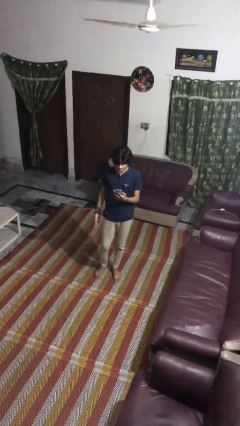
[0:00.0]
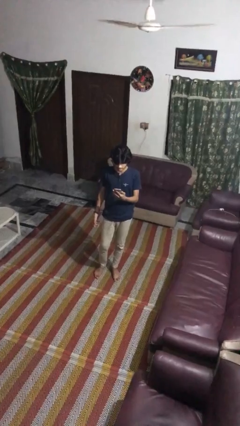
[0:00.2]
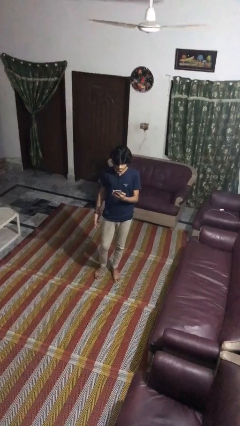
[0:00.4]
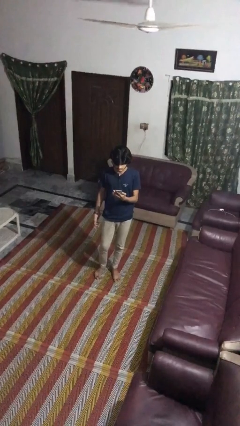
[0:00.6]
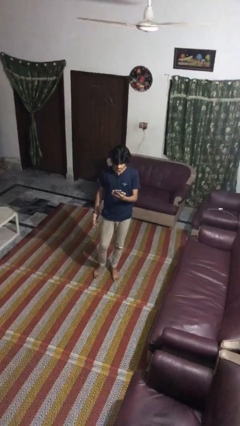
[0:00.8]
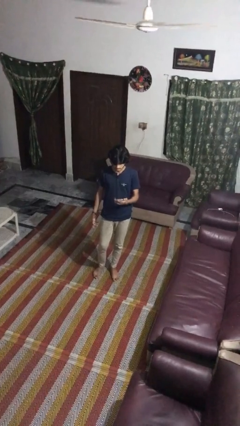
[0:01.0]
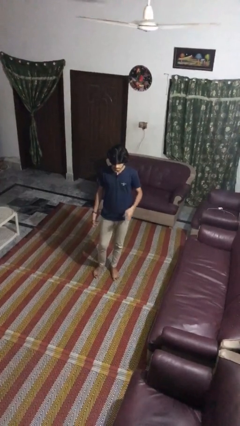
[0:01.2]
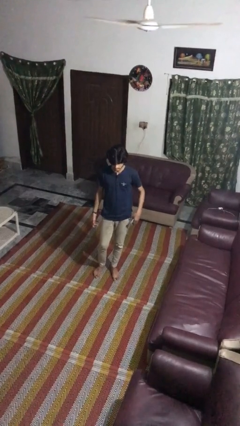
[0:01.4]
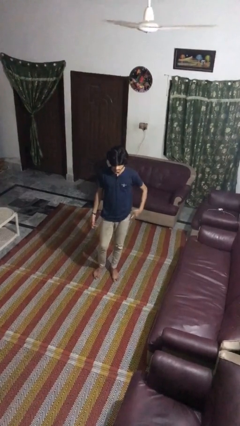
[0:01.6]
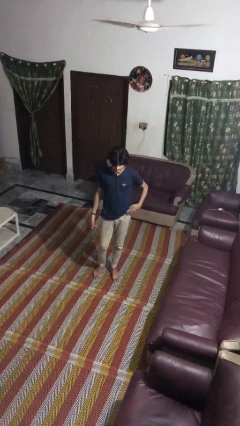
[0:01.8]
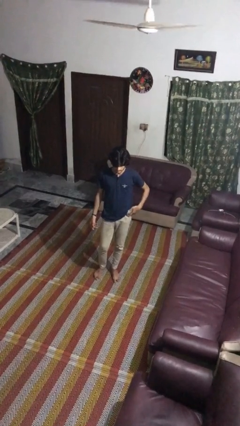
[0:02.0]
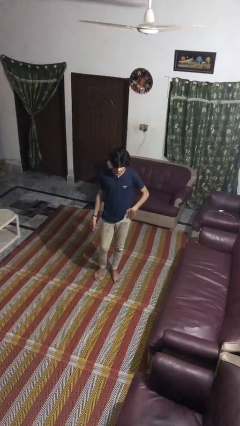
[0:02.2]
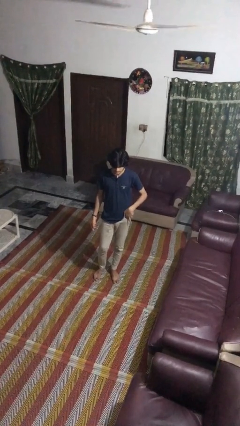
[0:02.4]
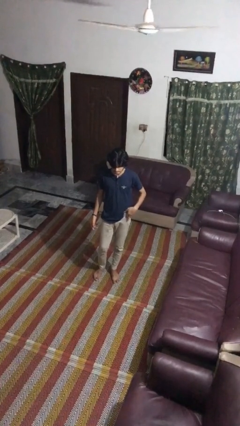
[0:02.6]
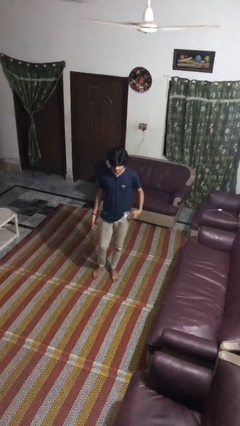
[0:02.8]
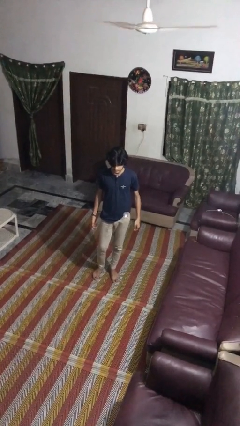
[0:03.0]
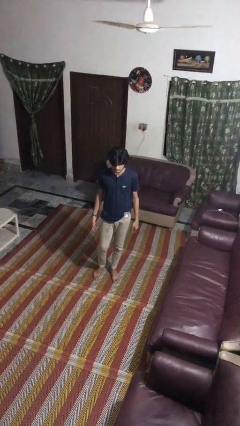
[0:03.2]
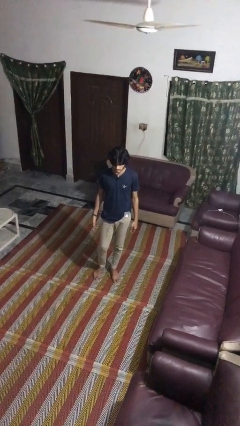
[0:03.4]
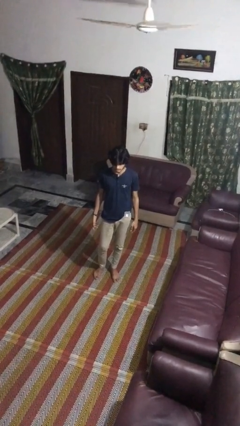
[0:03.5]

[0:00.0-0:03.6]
person puts phone into pocket

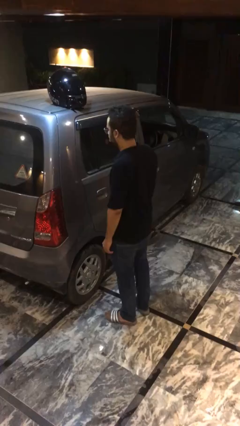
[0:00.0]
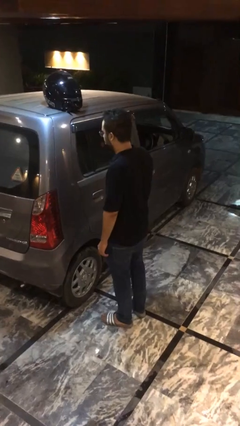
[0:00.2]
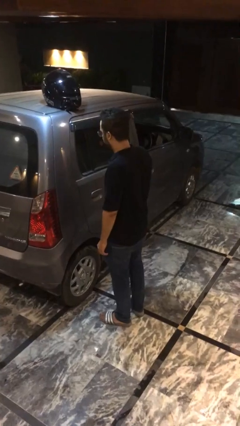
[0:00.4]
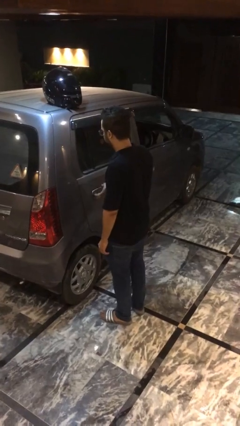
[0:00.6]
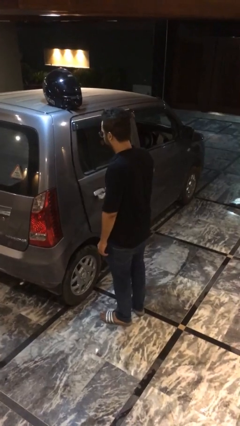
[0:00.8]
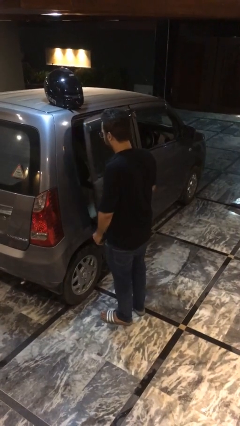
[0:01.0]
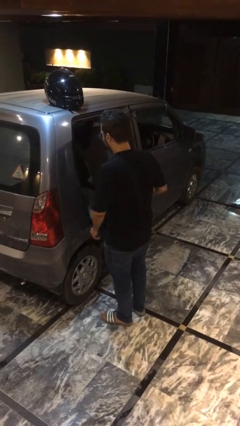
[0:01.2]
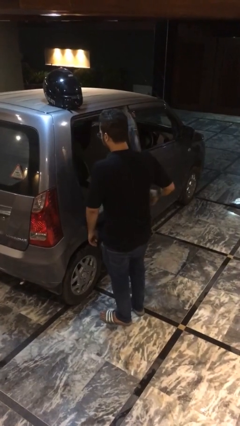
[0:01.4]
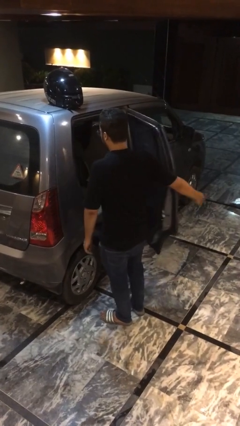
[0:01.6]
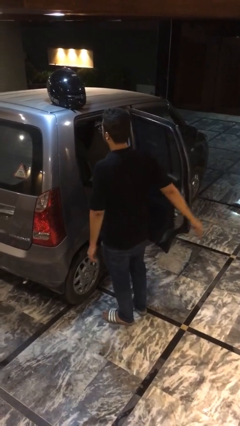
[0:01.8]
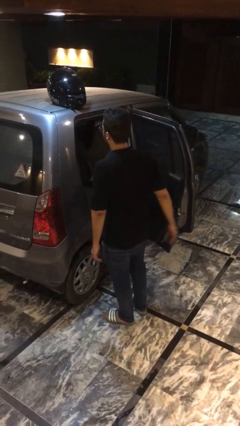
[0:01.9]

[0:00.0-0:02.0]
person opens car door

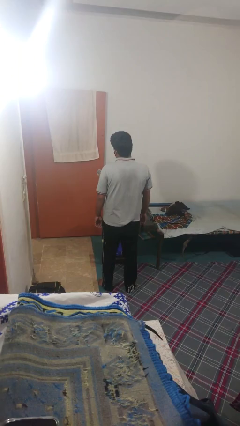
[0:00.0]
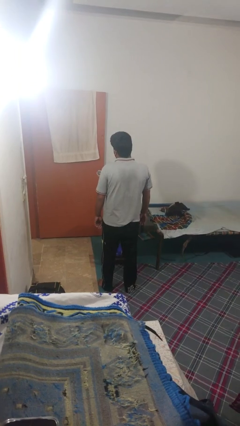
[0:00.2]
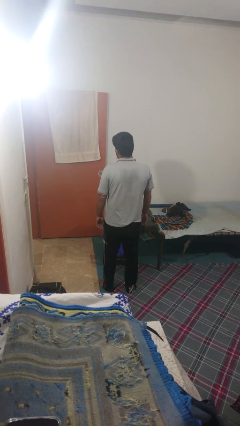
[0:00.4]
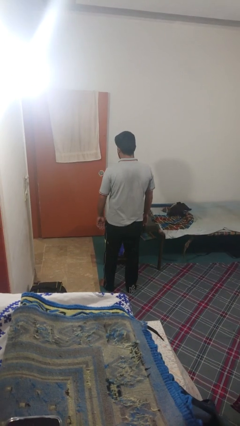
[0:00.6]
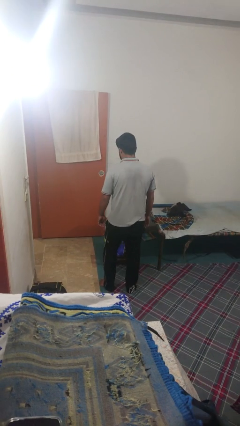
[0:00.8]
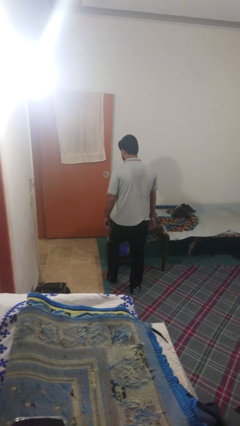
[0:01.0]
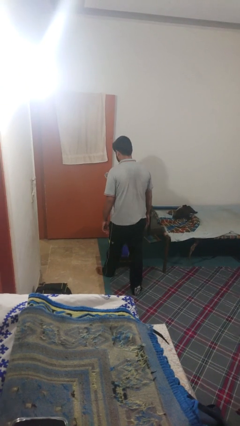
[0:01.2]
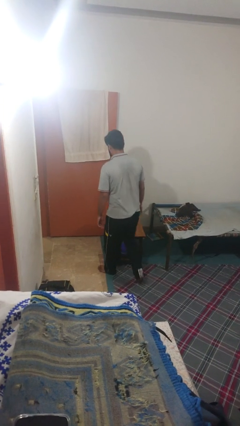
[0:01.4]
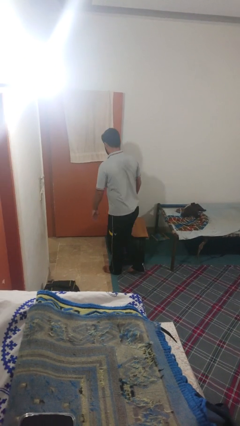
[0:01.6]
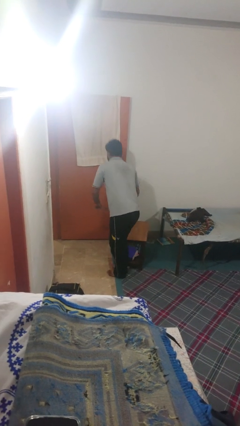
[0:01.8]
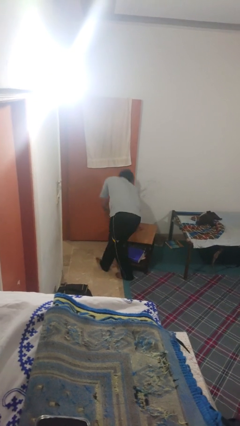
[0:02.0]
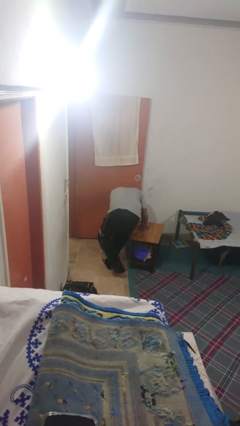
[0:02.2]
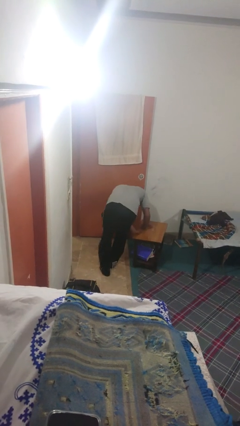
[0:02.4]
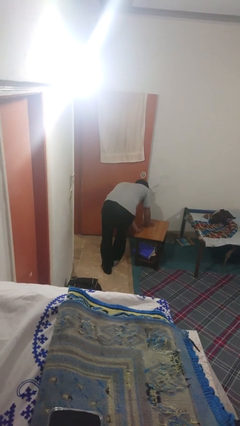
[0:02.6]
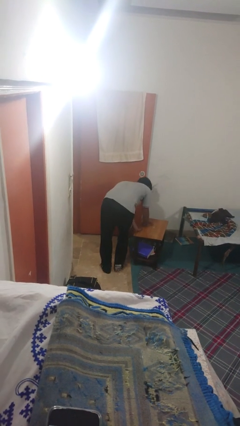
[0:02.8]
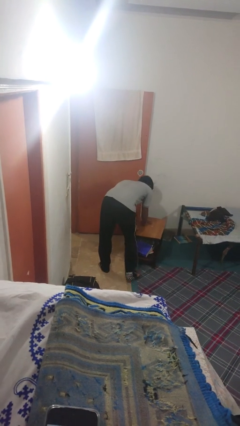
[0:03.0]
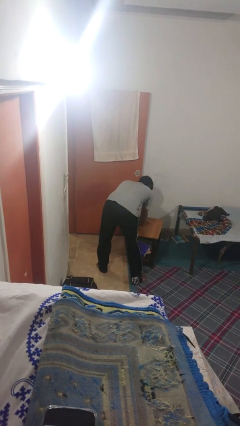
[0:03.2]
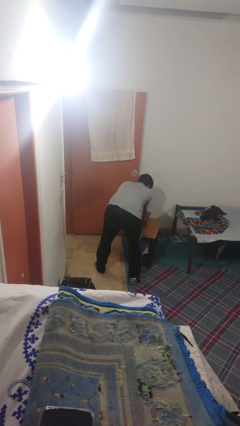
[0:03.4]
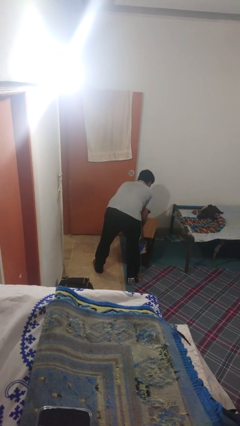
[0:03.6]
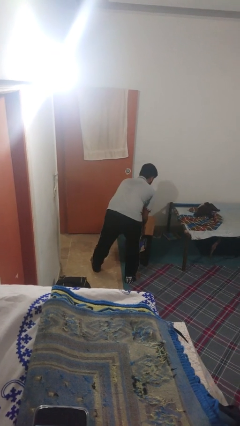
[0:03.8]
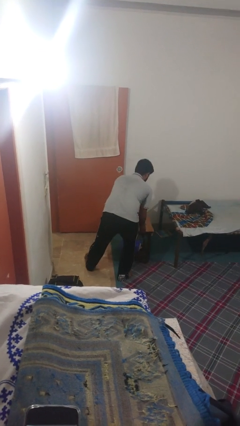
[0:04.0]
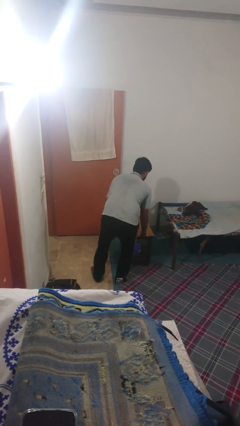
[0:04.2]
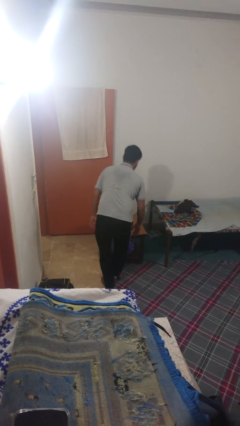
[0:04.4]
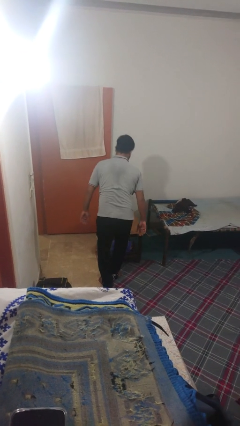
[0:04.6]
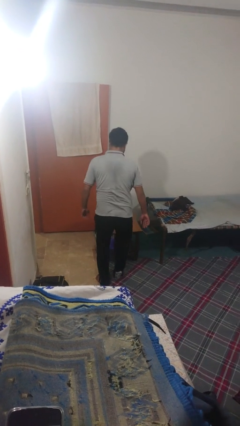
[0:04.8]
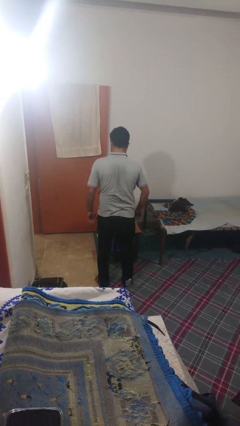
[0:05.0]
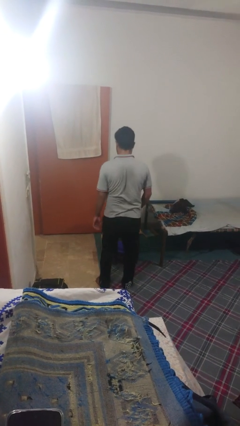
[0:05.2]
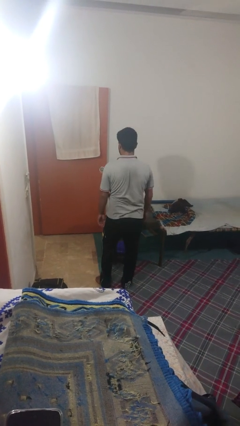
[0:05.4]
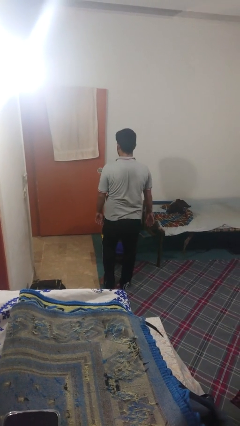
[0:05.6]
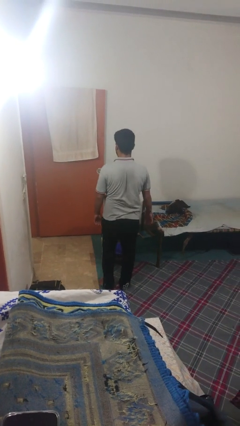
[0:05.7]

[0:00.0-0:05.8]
person bumps into table

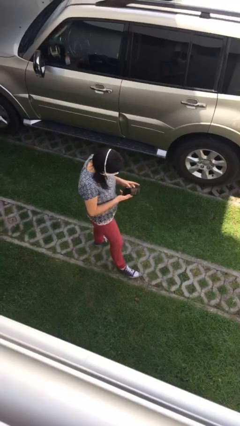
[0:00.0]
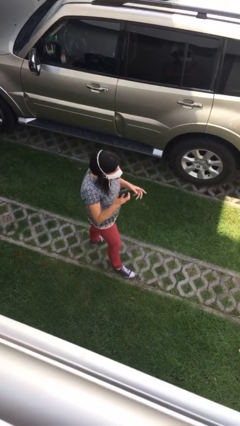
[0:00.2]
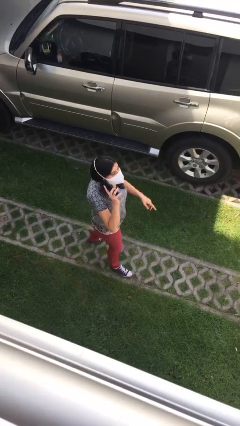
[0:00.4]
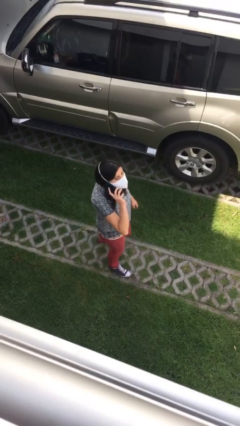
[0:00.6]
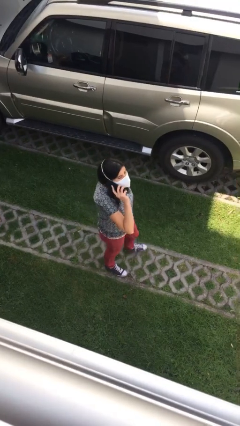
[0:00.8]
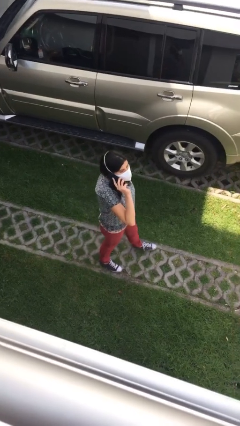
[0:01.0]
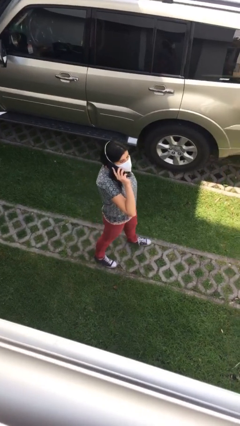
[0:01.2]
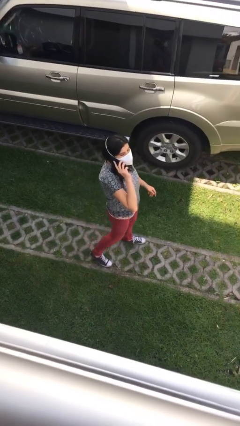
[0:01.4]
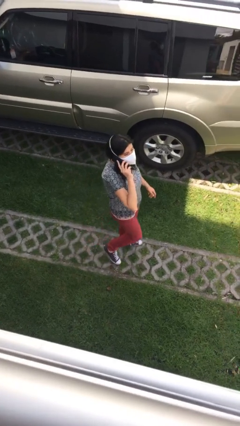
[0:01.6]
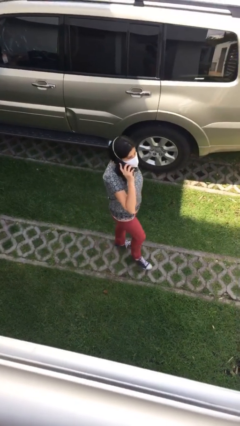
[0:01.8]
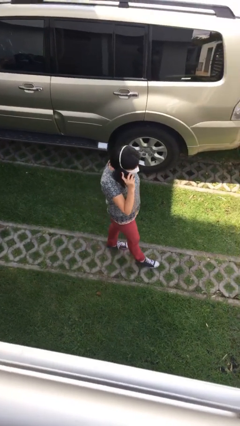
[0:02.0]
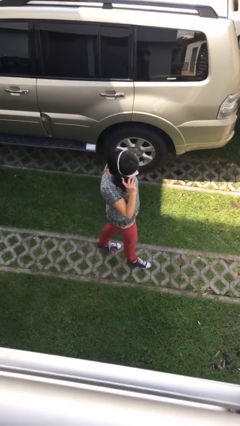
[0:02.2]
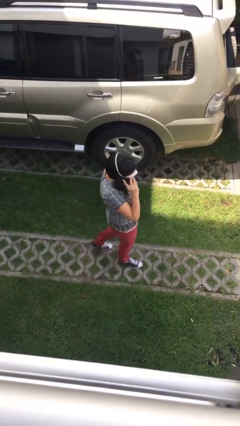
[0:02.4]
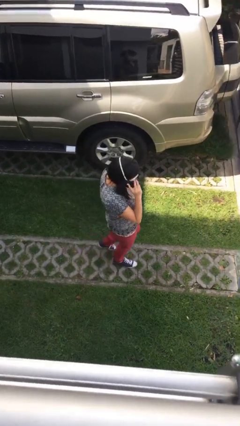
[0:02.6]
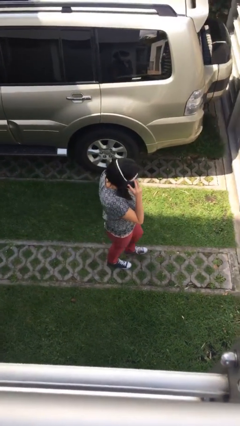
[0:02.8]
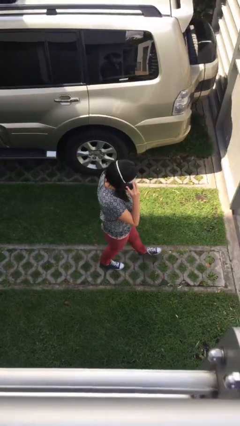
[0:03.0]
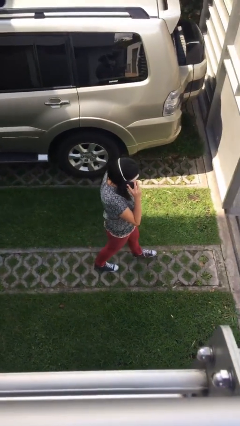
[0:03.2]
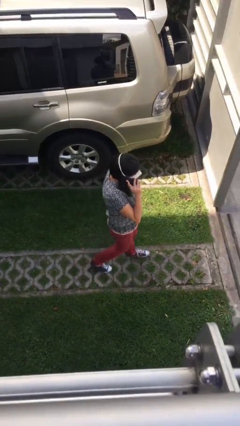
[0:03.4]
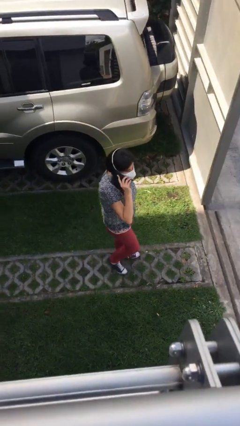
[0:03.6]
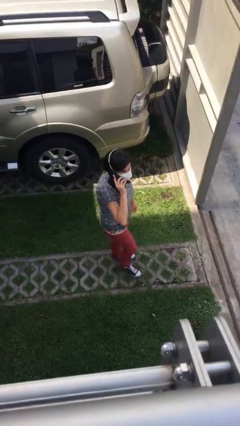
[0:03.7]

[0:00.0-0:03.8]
person talks on phone

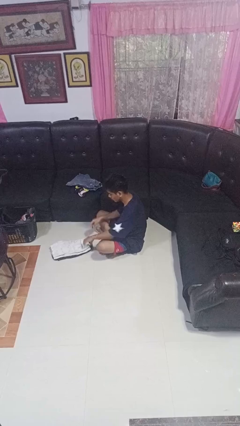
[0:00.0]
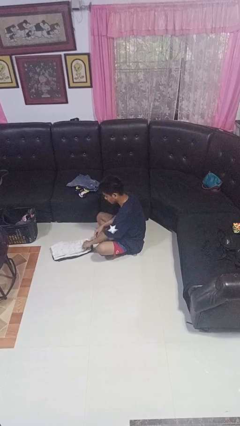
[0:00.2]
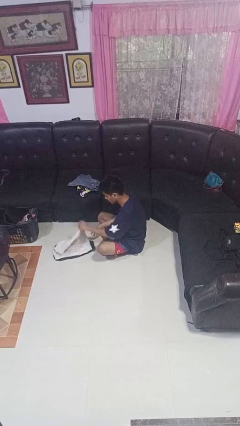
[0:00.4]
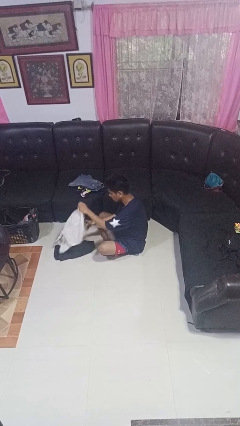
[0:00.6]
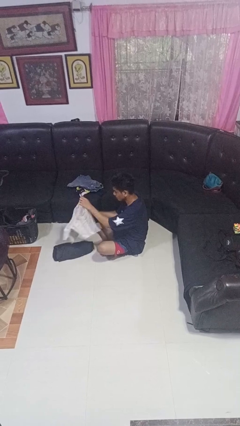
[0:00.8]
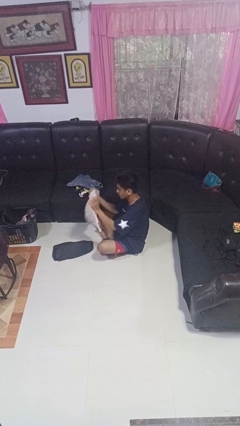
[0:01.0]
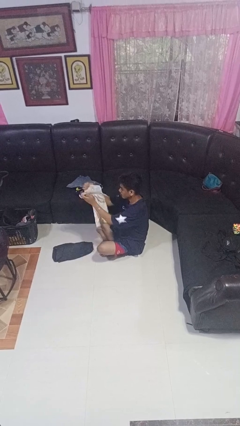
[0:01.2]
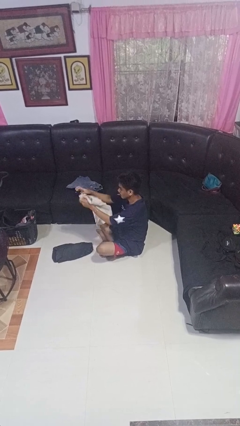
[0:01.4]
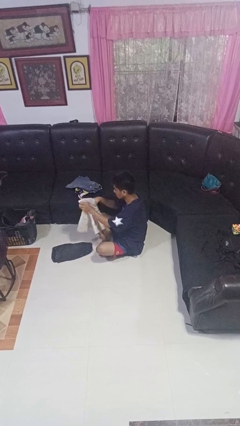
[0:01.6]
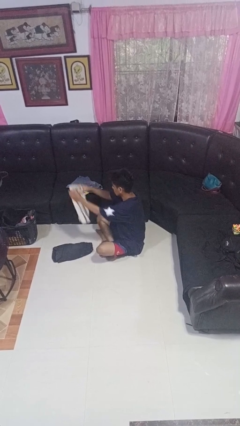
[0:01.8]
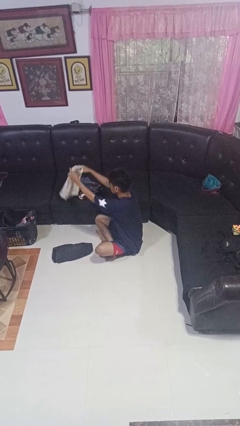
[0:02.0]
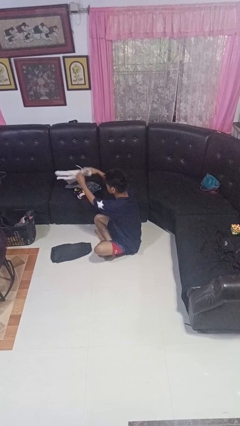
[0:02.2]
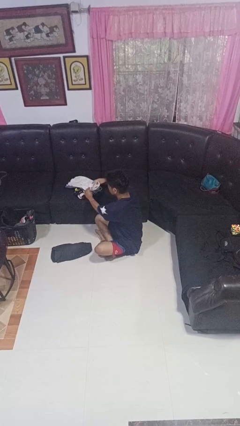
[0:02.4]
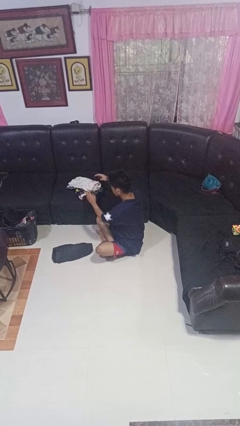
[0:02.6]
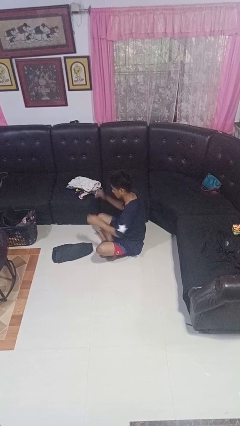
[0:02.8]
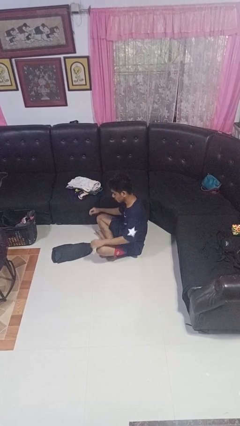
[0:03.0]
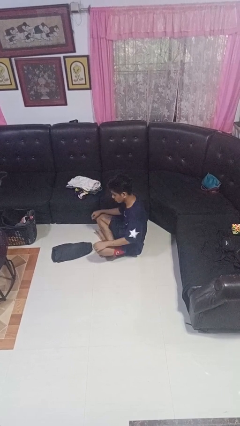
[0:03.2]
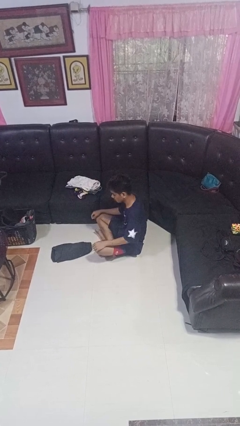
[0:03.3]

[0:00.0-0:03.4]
person folds pants
